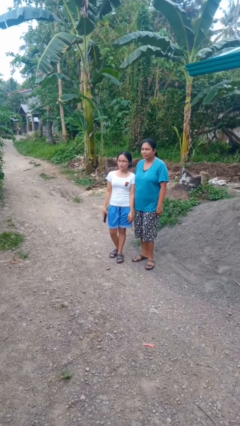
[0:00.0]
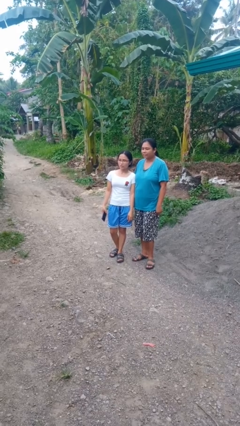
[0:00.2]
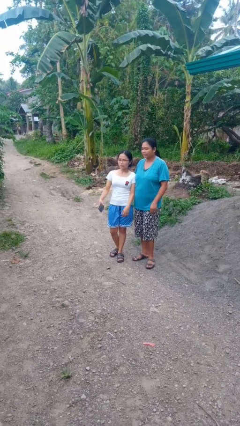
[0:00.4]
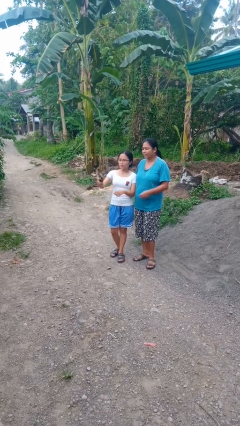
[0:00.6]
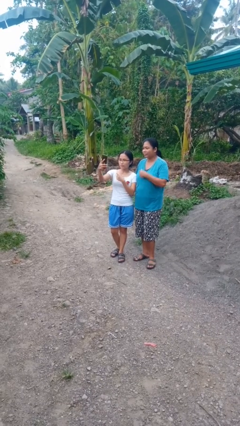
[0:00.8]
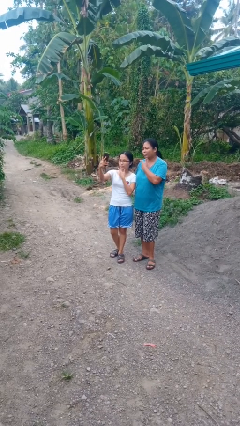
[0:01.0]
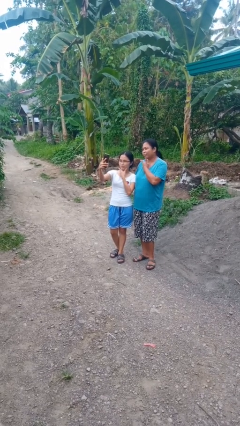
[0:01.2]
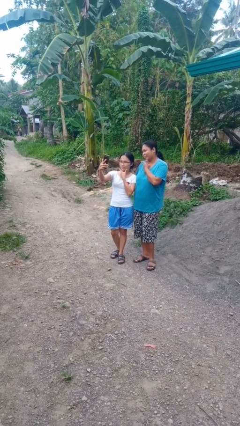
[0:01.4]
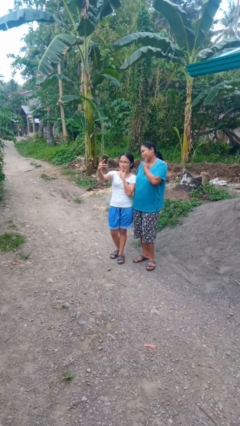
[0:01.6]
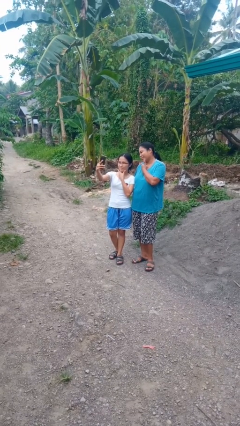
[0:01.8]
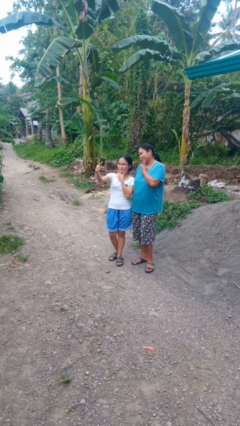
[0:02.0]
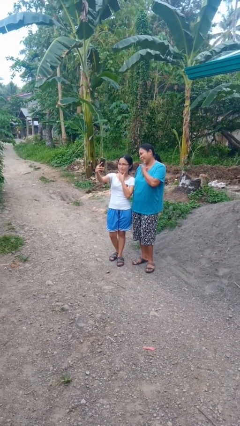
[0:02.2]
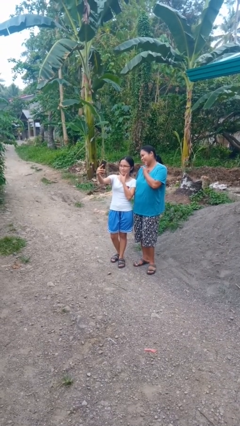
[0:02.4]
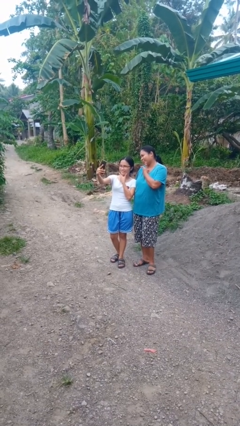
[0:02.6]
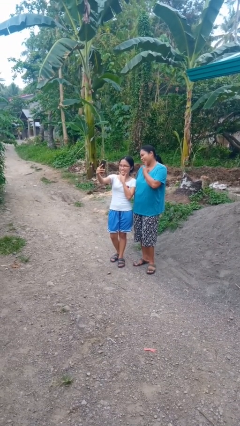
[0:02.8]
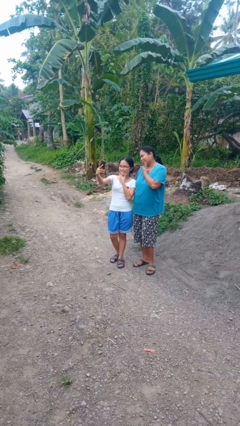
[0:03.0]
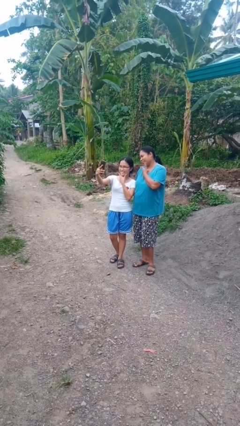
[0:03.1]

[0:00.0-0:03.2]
person takes selfie with person

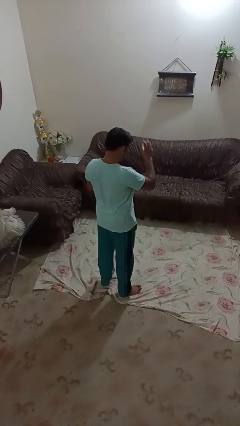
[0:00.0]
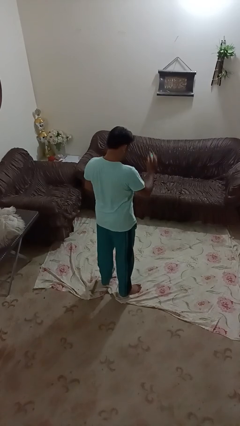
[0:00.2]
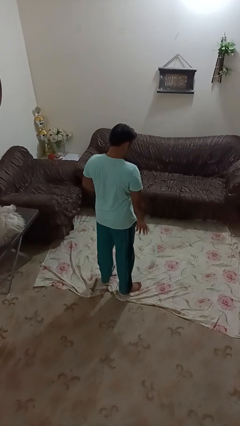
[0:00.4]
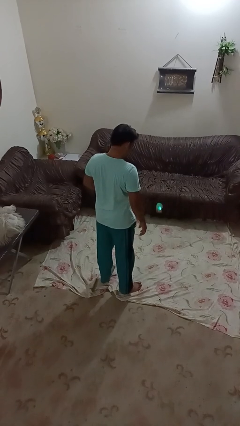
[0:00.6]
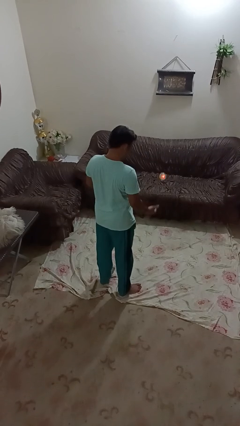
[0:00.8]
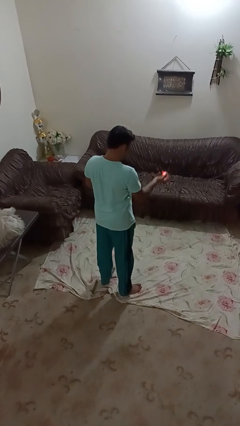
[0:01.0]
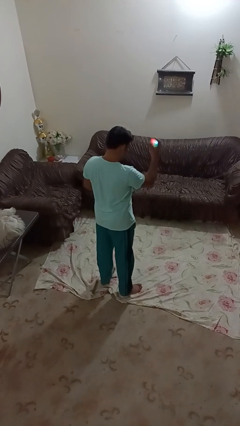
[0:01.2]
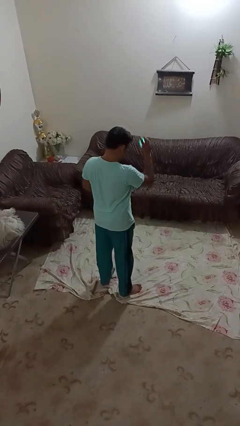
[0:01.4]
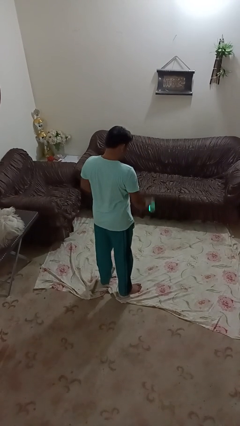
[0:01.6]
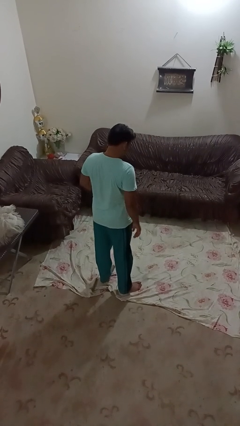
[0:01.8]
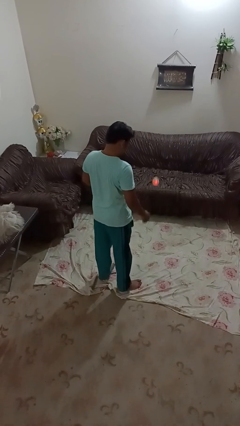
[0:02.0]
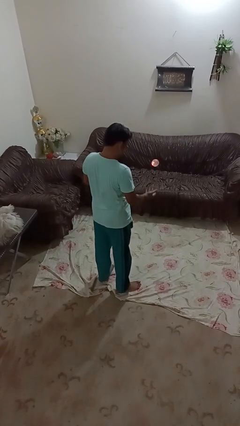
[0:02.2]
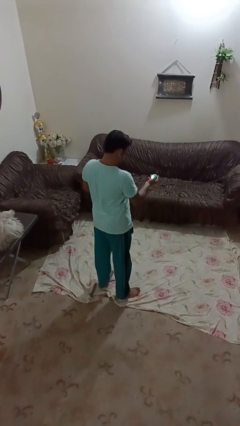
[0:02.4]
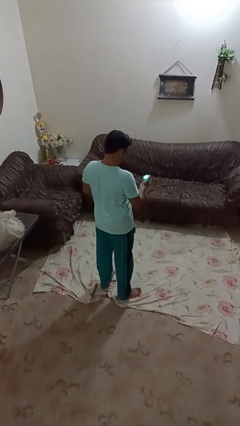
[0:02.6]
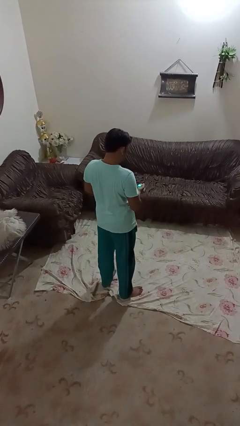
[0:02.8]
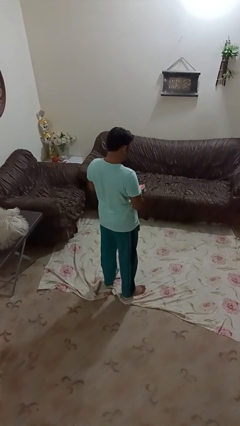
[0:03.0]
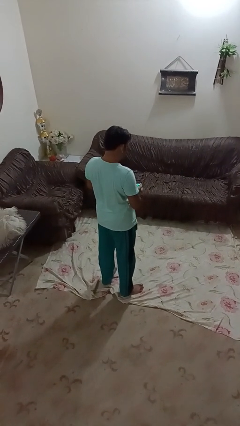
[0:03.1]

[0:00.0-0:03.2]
person bounces ball on floor

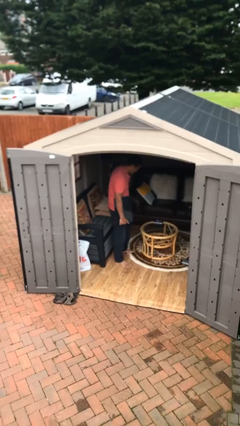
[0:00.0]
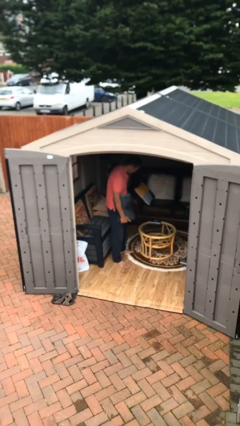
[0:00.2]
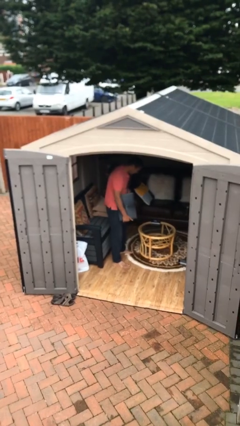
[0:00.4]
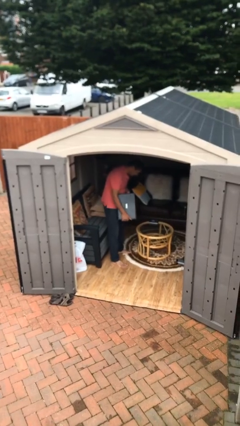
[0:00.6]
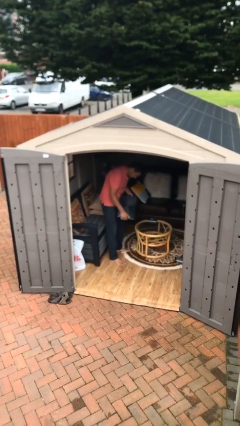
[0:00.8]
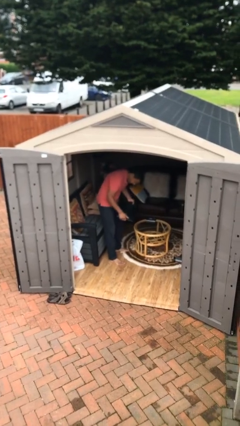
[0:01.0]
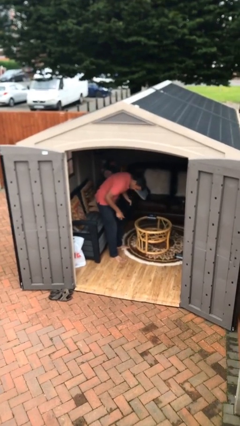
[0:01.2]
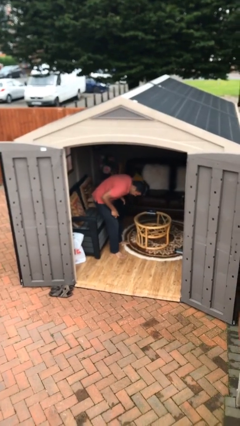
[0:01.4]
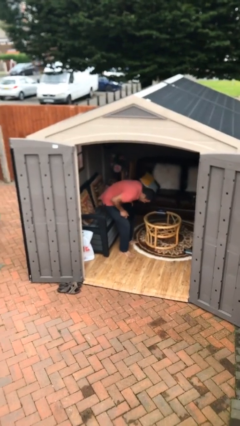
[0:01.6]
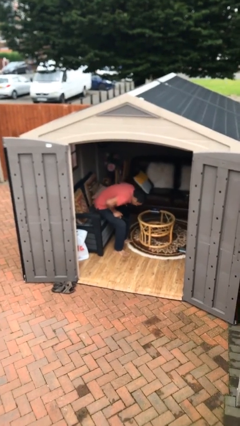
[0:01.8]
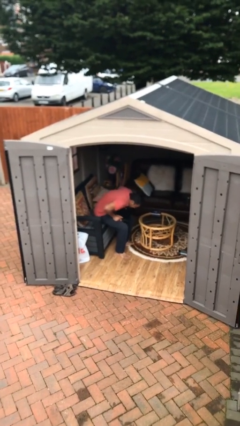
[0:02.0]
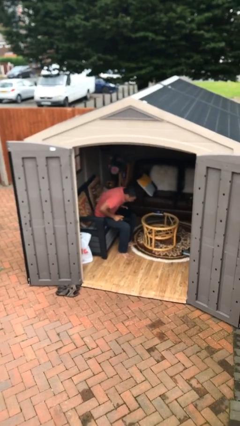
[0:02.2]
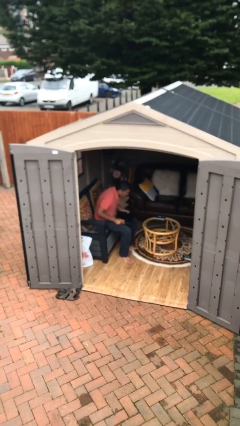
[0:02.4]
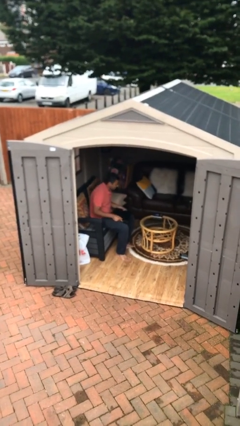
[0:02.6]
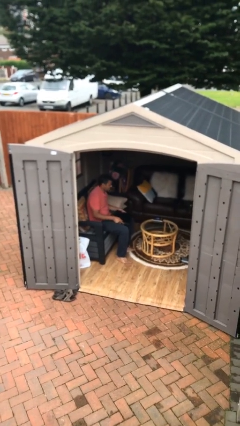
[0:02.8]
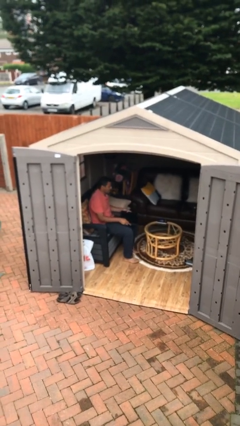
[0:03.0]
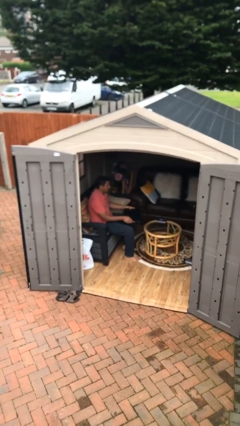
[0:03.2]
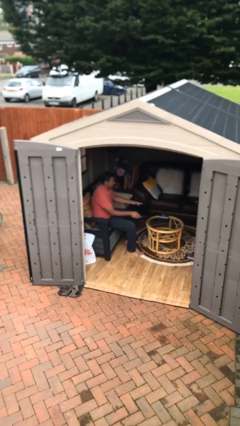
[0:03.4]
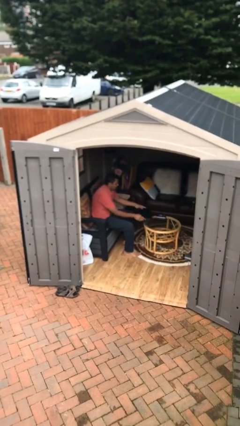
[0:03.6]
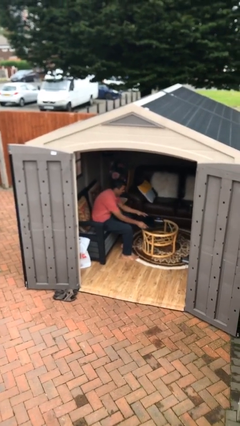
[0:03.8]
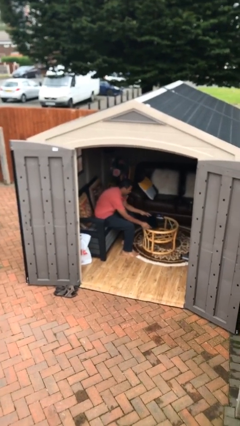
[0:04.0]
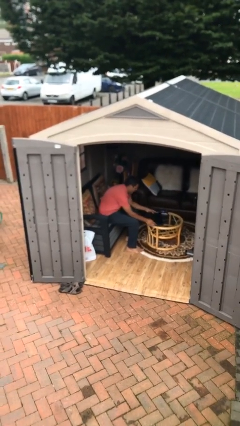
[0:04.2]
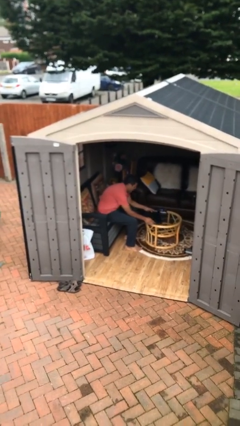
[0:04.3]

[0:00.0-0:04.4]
person sits down

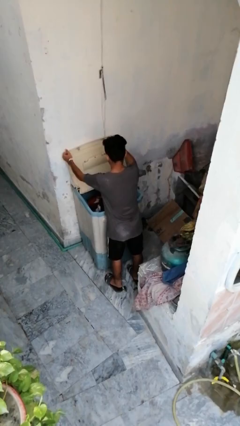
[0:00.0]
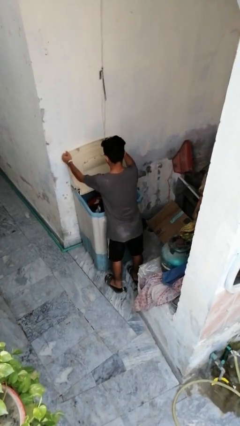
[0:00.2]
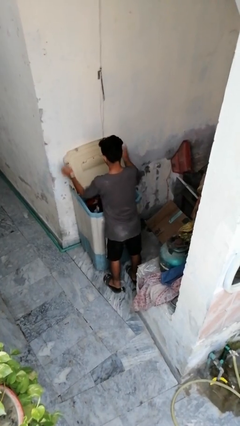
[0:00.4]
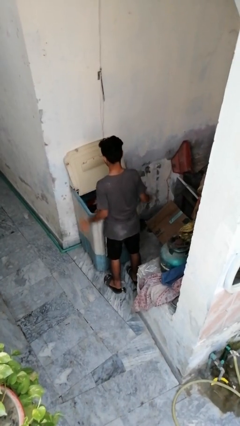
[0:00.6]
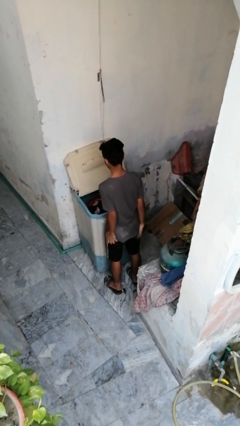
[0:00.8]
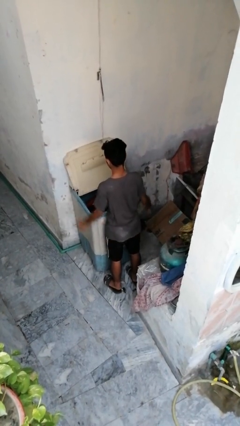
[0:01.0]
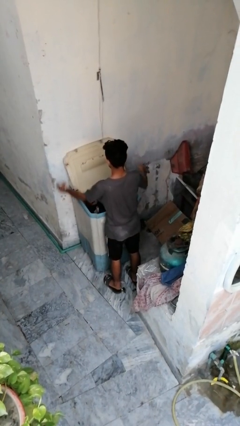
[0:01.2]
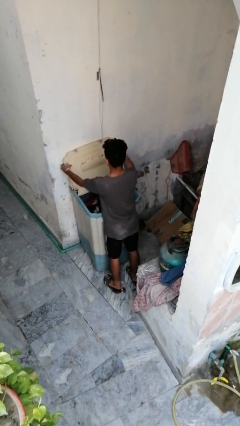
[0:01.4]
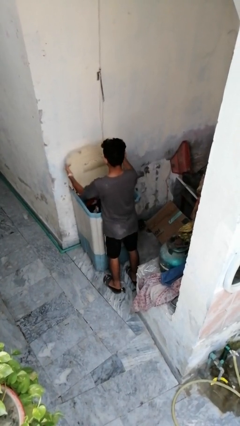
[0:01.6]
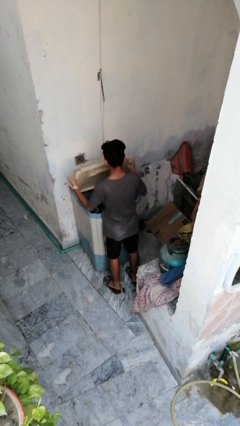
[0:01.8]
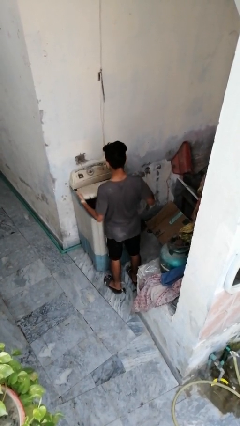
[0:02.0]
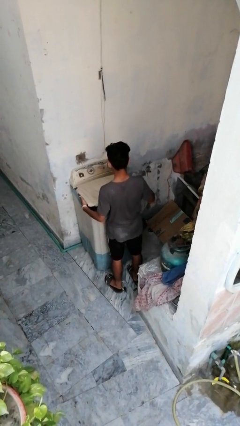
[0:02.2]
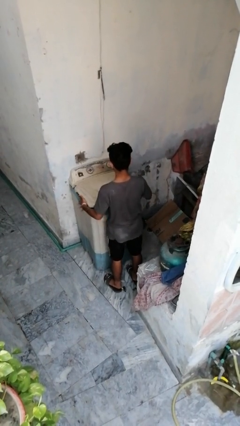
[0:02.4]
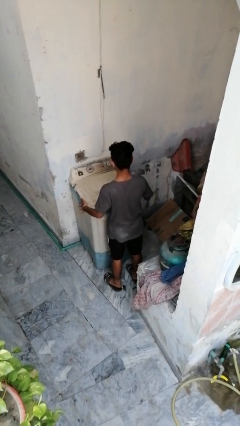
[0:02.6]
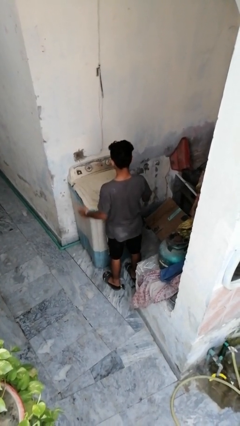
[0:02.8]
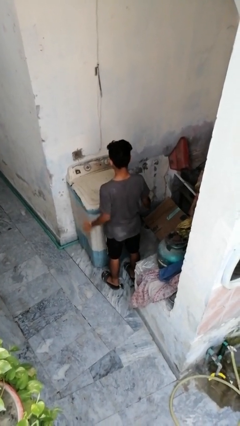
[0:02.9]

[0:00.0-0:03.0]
person closes clothes washer

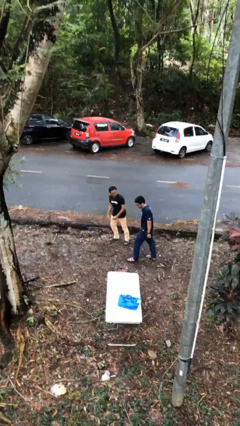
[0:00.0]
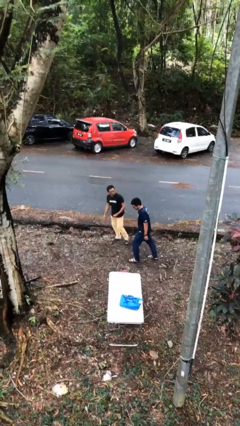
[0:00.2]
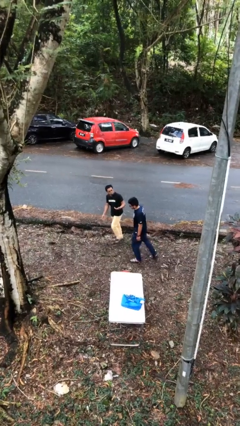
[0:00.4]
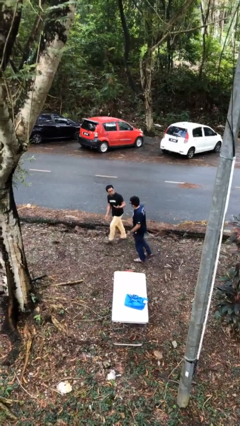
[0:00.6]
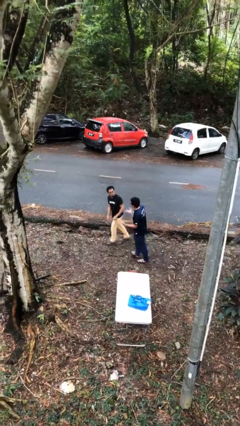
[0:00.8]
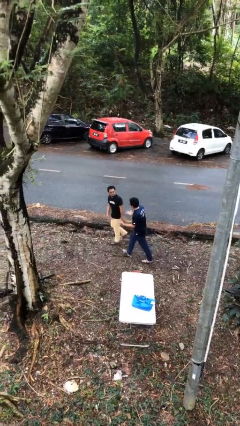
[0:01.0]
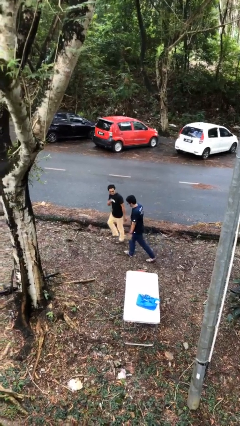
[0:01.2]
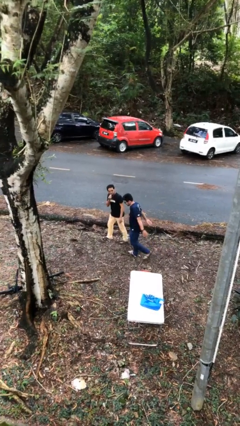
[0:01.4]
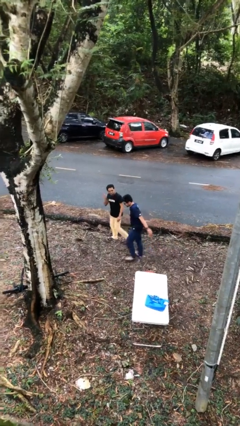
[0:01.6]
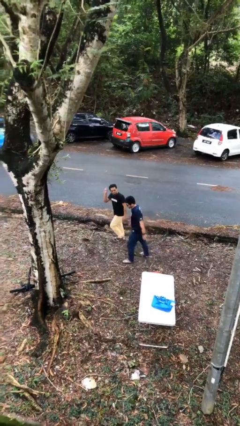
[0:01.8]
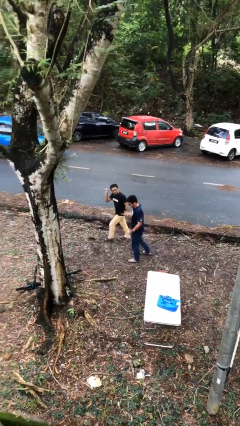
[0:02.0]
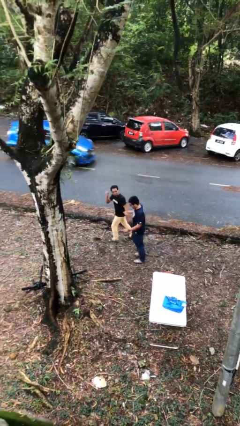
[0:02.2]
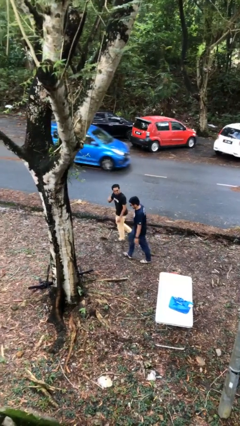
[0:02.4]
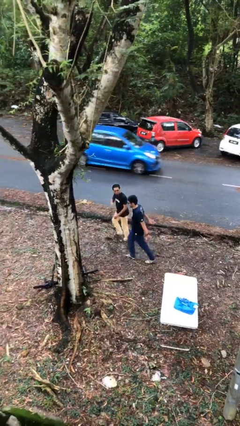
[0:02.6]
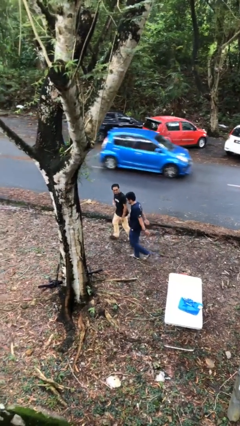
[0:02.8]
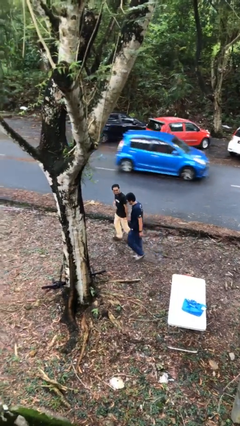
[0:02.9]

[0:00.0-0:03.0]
person talks to person

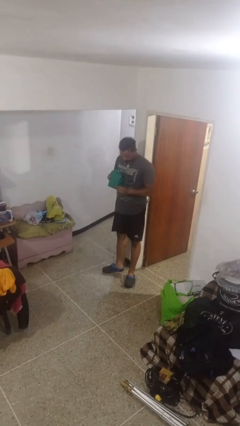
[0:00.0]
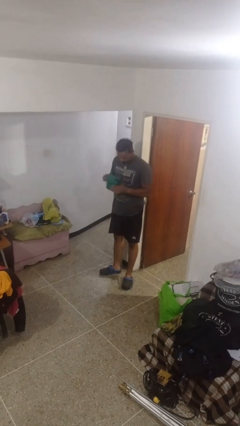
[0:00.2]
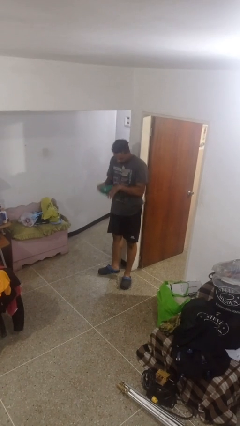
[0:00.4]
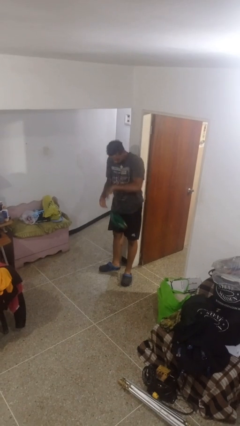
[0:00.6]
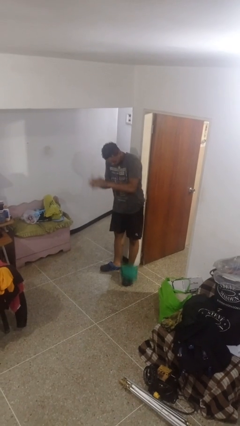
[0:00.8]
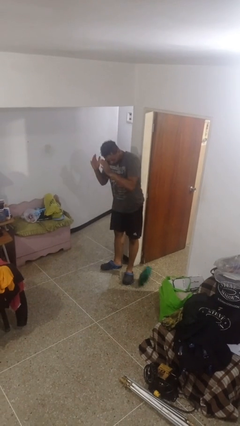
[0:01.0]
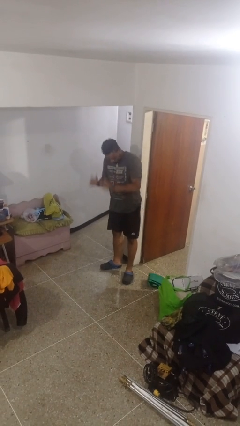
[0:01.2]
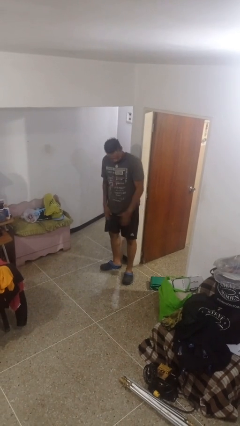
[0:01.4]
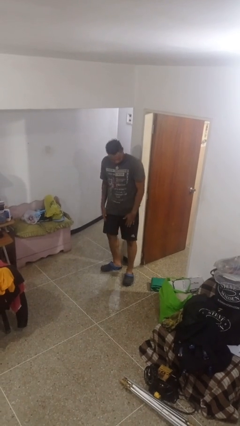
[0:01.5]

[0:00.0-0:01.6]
person drops object
